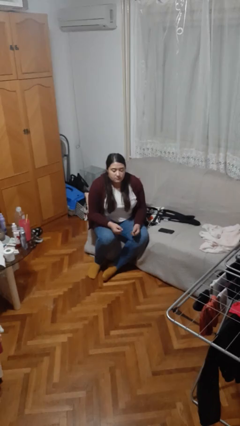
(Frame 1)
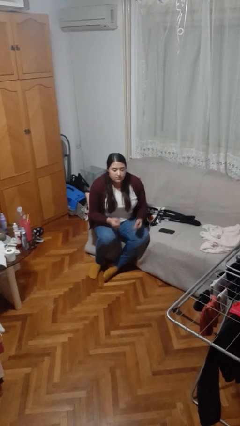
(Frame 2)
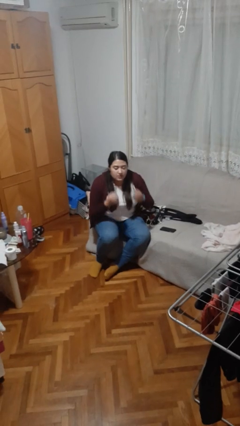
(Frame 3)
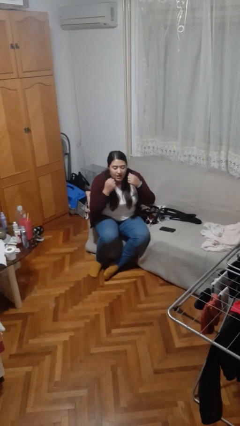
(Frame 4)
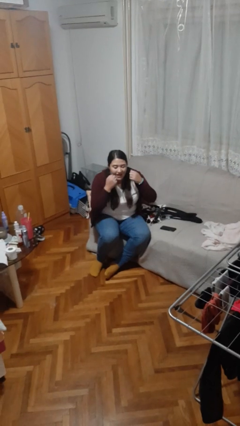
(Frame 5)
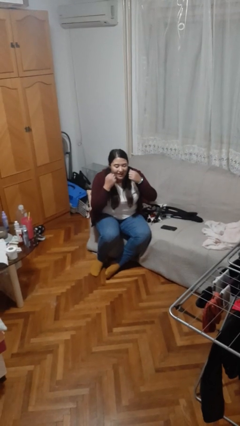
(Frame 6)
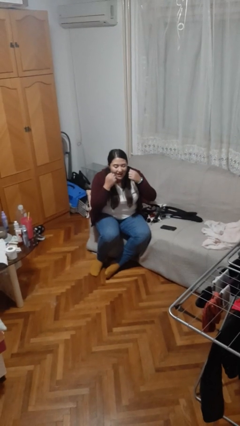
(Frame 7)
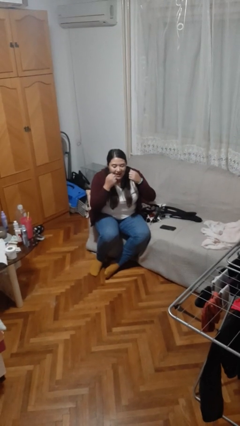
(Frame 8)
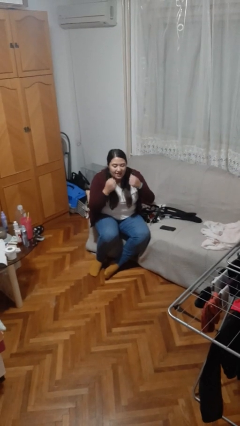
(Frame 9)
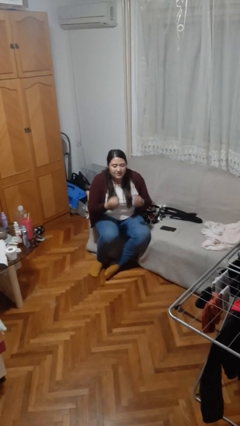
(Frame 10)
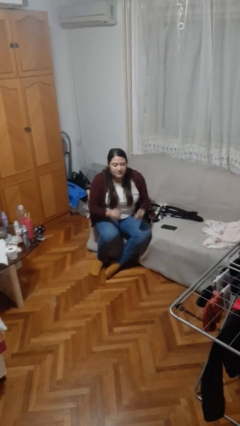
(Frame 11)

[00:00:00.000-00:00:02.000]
person flosses

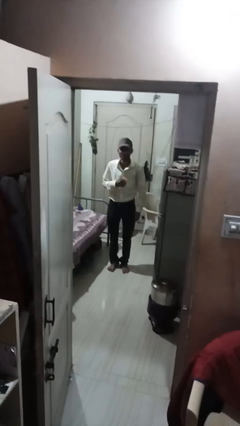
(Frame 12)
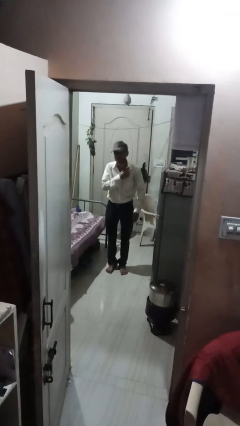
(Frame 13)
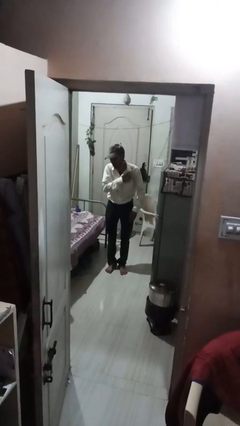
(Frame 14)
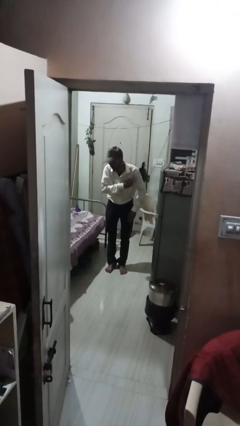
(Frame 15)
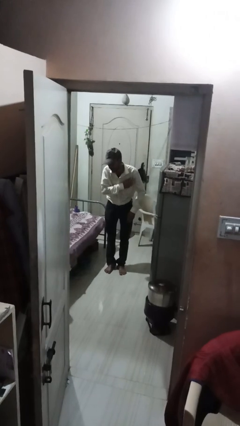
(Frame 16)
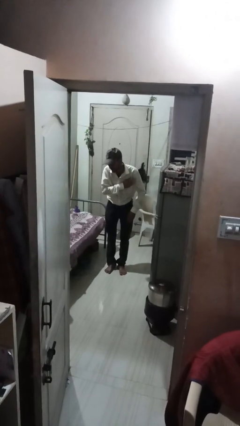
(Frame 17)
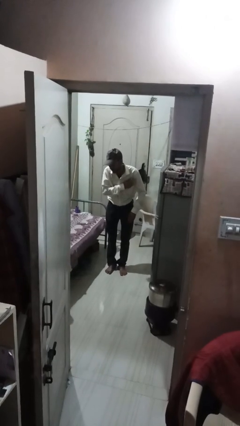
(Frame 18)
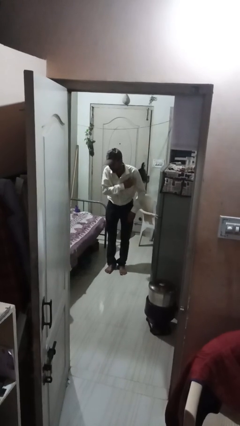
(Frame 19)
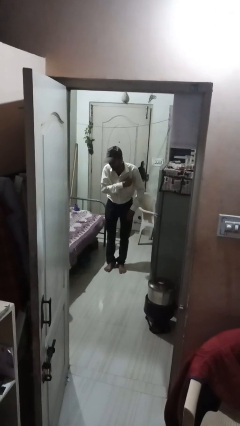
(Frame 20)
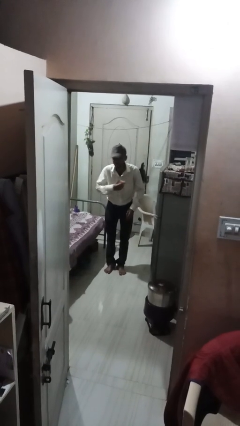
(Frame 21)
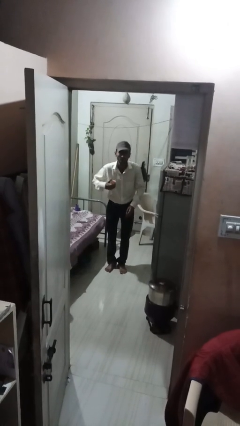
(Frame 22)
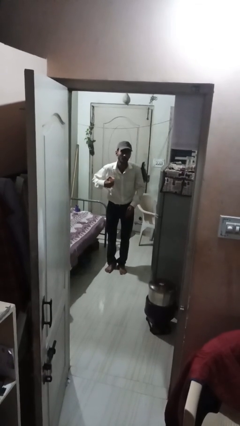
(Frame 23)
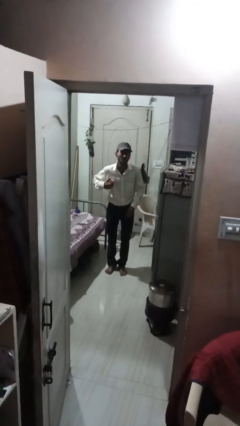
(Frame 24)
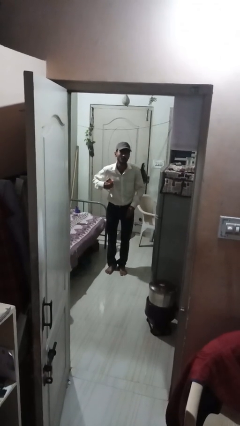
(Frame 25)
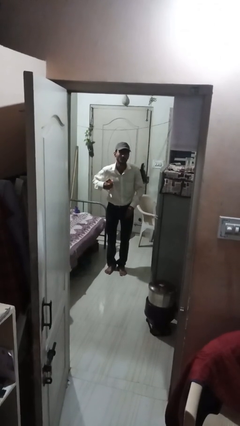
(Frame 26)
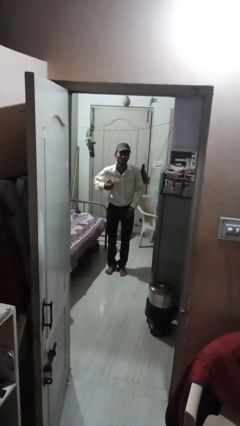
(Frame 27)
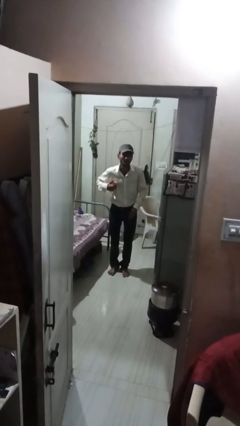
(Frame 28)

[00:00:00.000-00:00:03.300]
person applies deodorant

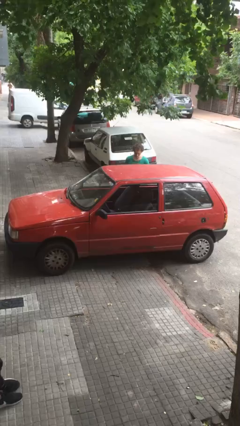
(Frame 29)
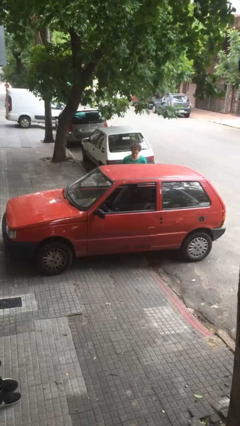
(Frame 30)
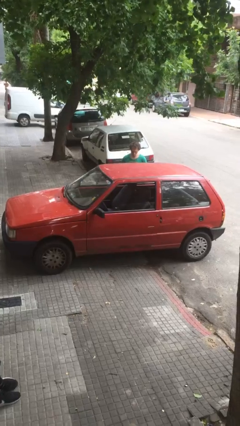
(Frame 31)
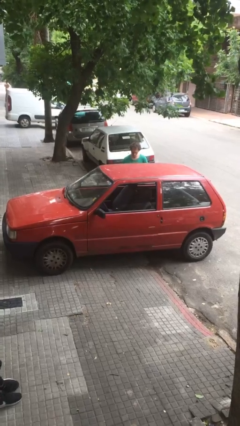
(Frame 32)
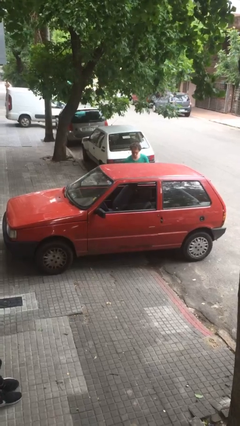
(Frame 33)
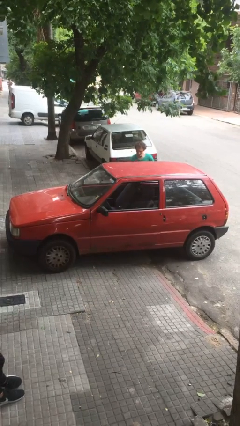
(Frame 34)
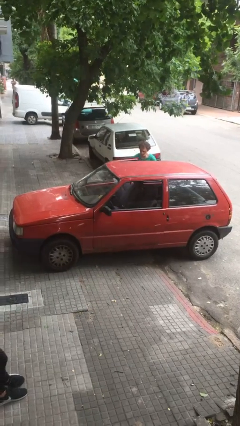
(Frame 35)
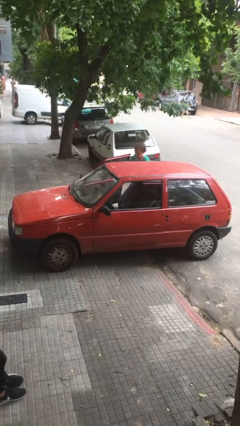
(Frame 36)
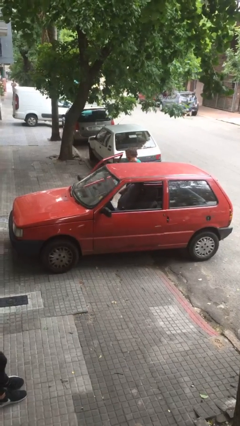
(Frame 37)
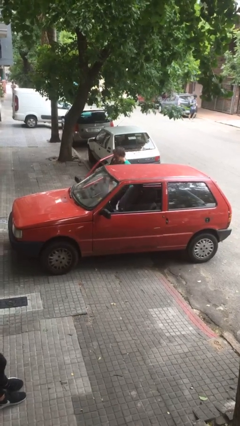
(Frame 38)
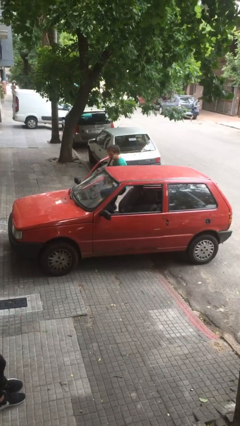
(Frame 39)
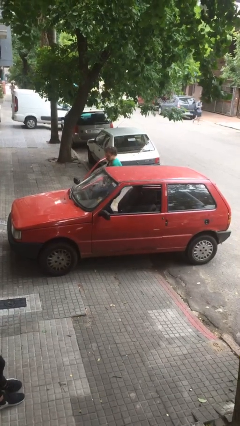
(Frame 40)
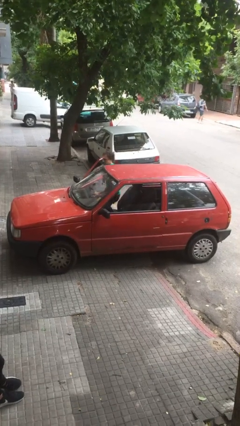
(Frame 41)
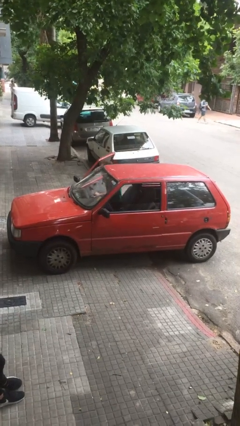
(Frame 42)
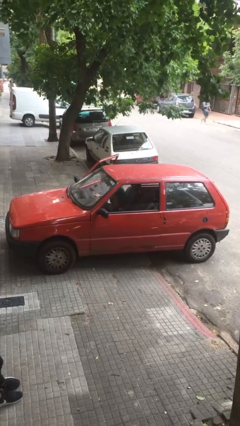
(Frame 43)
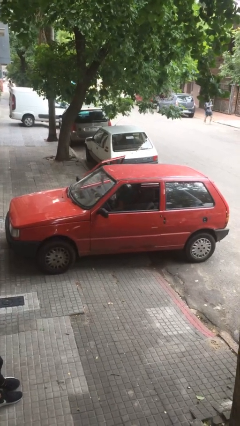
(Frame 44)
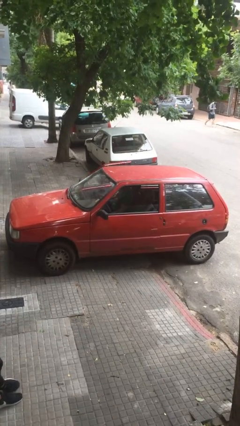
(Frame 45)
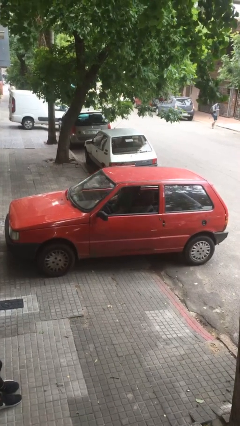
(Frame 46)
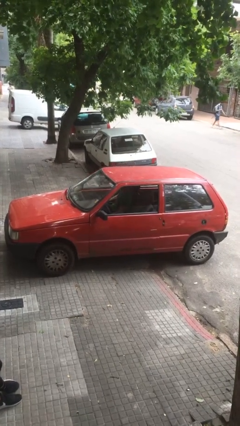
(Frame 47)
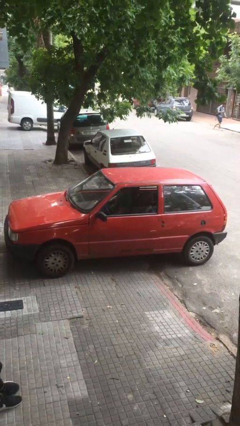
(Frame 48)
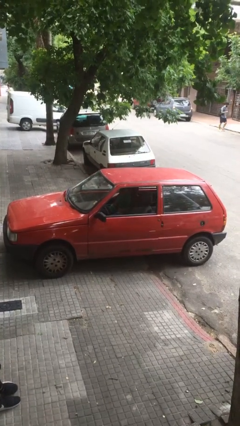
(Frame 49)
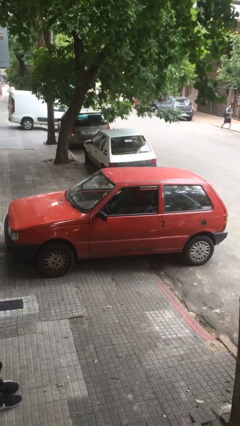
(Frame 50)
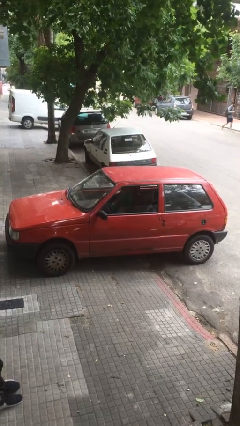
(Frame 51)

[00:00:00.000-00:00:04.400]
car picks up person

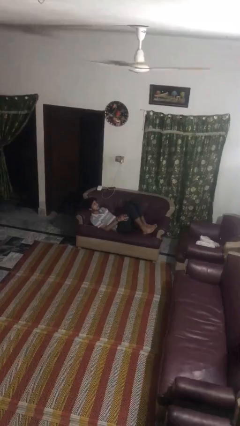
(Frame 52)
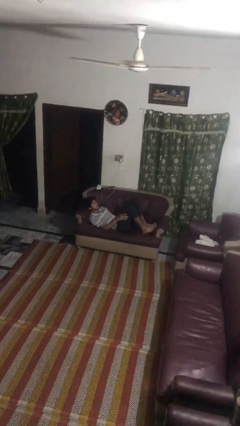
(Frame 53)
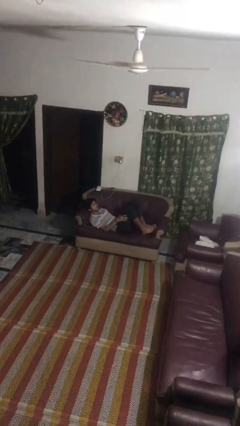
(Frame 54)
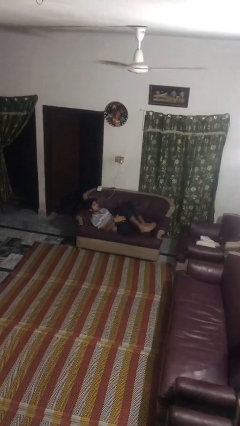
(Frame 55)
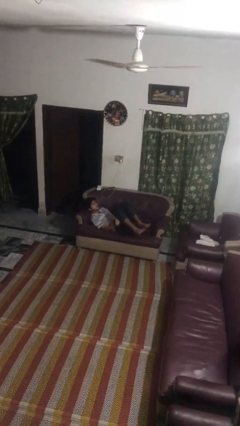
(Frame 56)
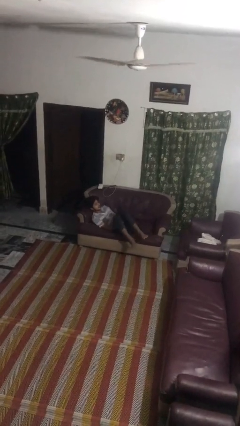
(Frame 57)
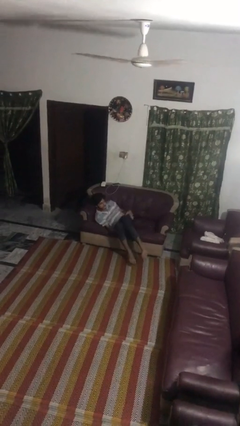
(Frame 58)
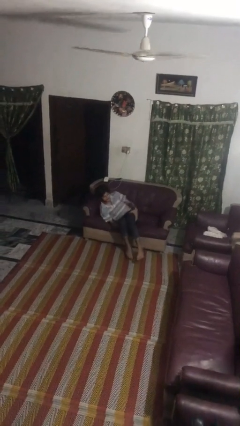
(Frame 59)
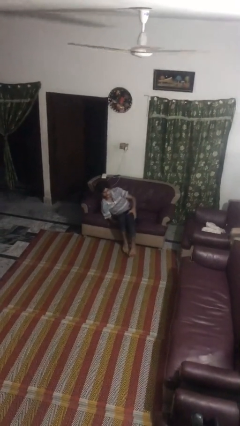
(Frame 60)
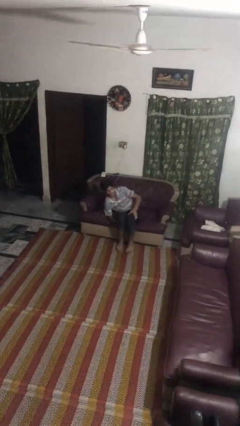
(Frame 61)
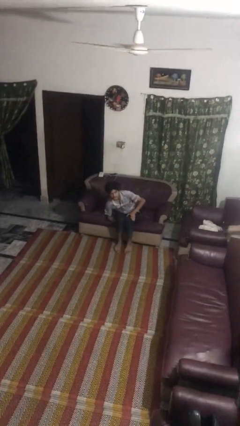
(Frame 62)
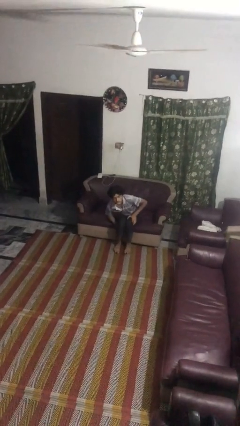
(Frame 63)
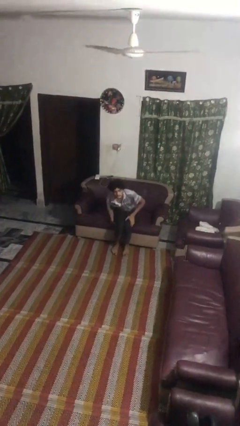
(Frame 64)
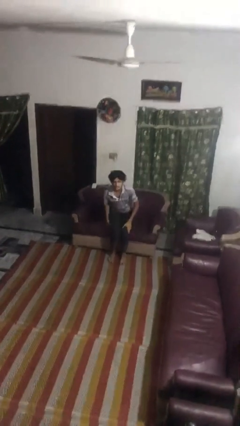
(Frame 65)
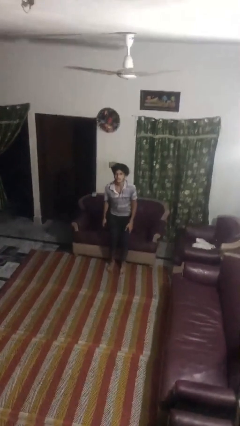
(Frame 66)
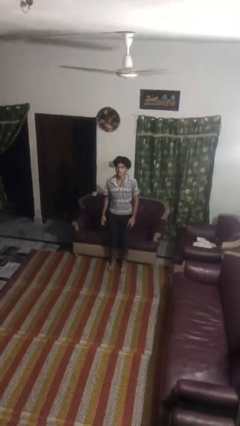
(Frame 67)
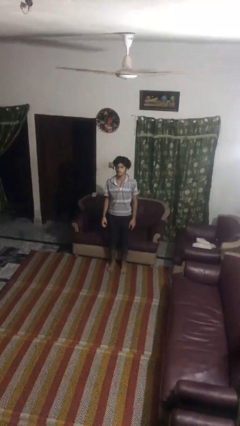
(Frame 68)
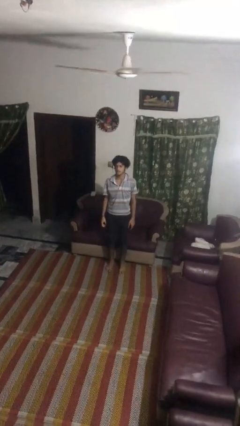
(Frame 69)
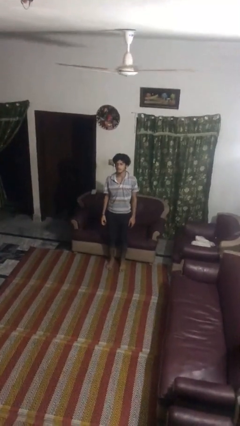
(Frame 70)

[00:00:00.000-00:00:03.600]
person stands up

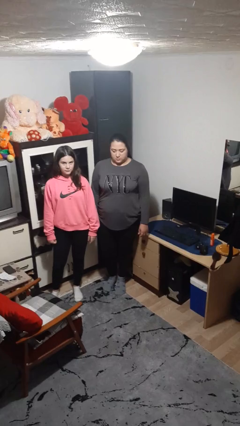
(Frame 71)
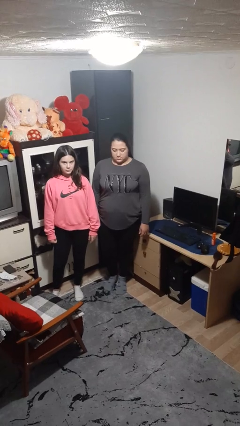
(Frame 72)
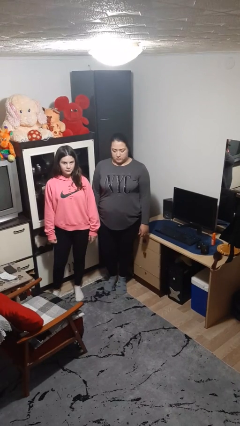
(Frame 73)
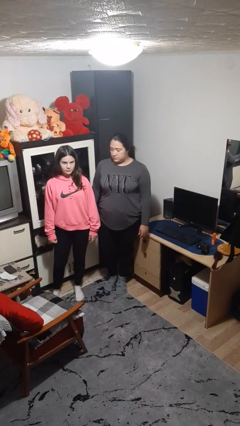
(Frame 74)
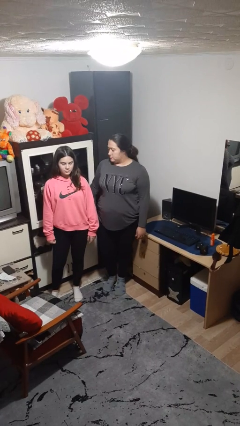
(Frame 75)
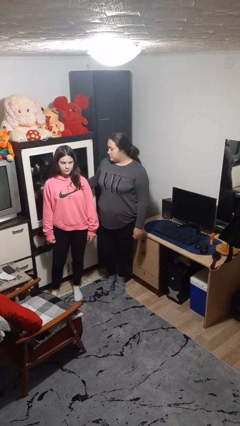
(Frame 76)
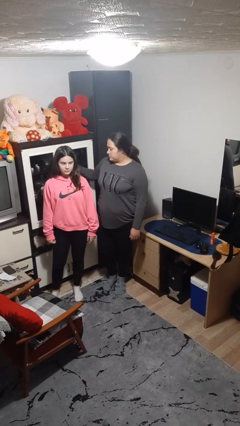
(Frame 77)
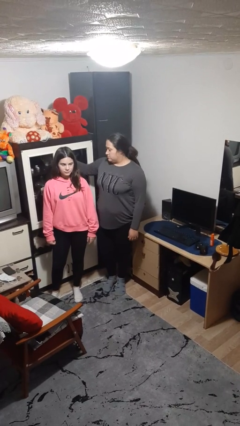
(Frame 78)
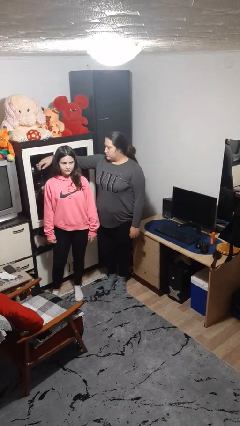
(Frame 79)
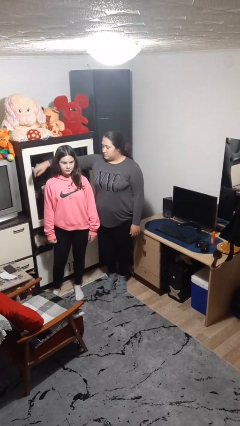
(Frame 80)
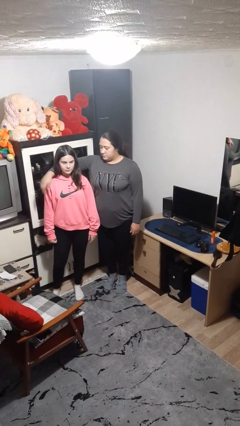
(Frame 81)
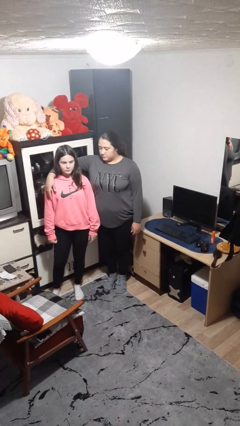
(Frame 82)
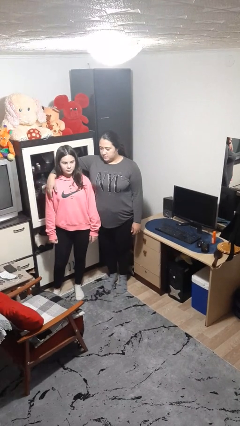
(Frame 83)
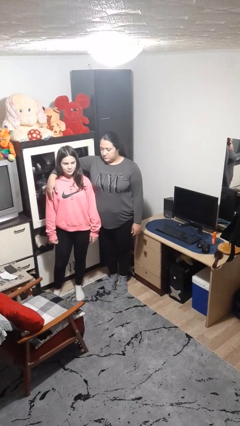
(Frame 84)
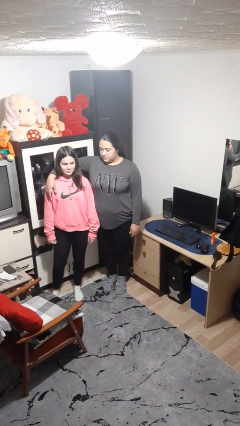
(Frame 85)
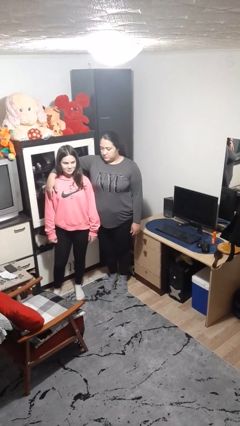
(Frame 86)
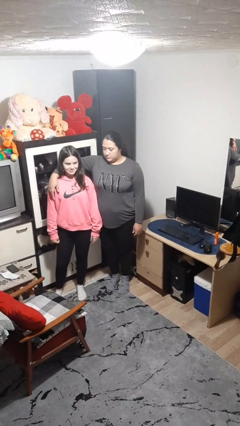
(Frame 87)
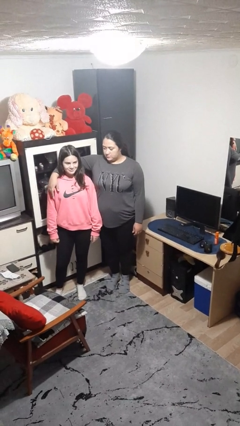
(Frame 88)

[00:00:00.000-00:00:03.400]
person hugs person from side

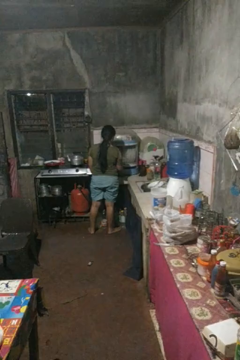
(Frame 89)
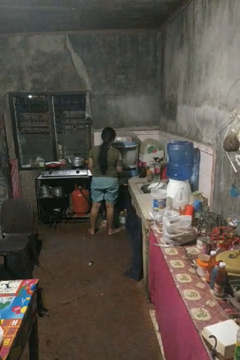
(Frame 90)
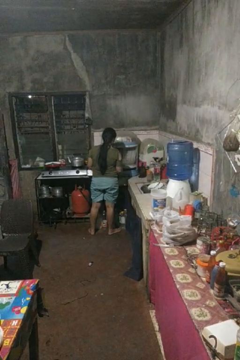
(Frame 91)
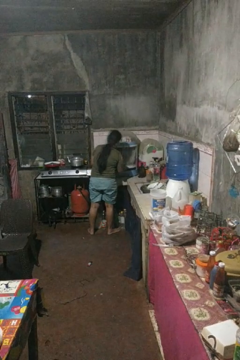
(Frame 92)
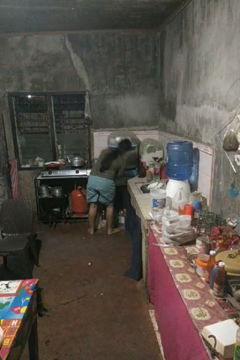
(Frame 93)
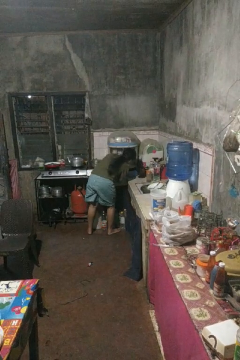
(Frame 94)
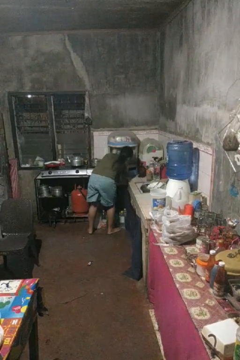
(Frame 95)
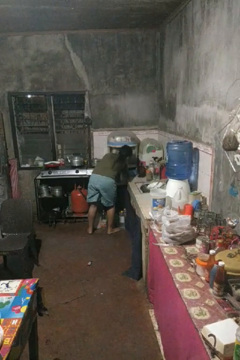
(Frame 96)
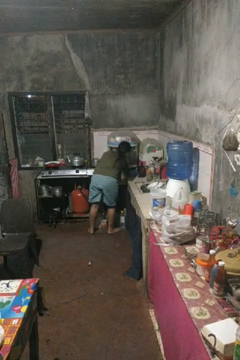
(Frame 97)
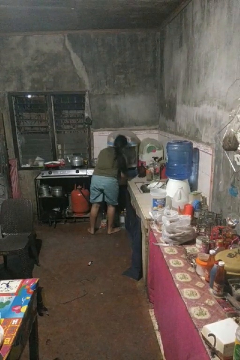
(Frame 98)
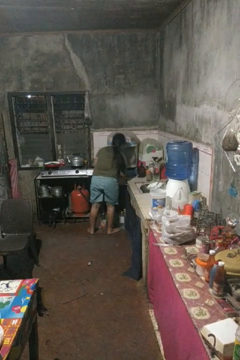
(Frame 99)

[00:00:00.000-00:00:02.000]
person searches in kitchen drawer
